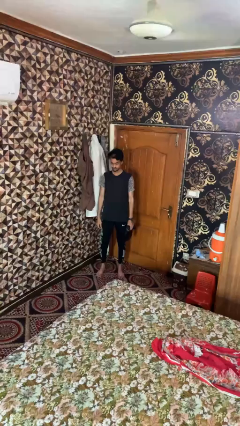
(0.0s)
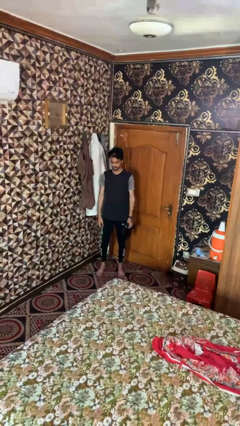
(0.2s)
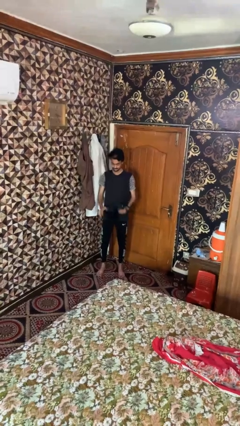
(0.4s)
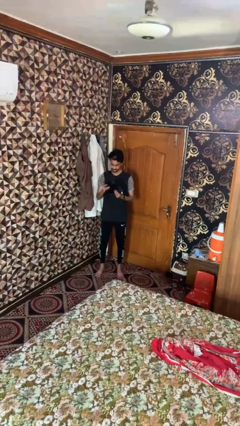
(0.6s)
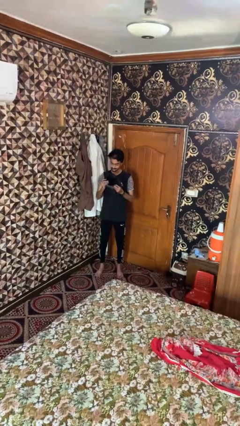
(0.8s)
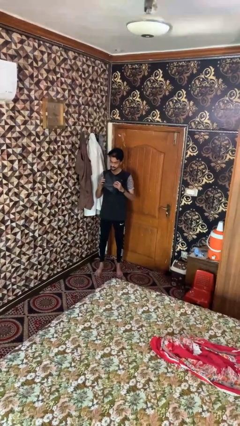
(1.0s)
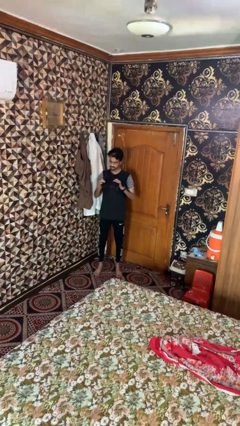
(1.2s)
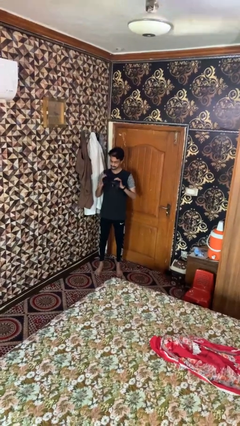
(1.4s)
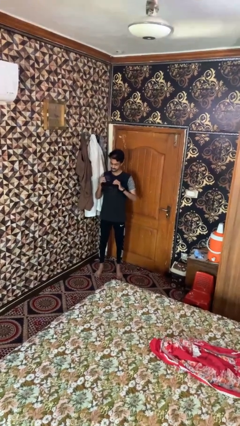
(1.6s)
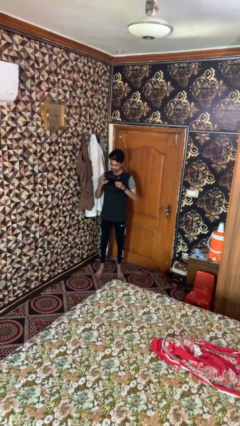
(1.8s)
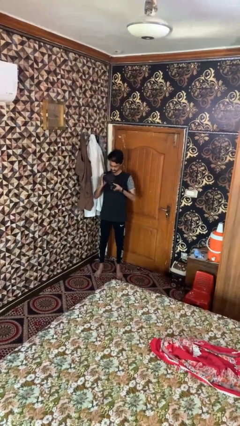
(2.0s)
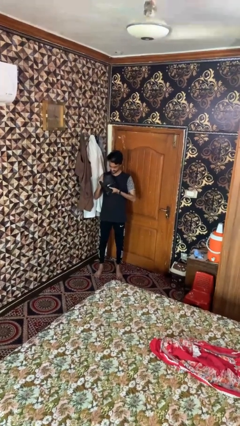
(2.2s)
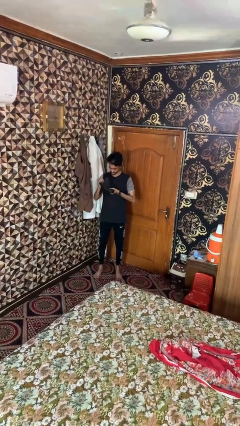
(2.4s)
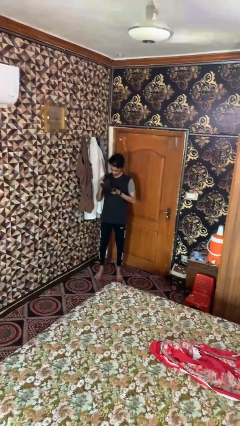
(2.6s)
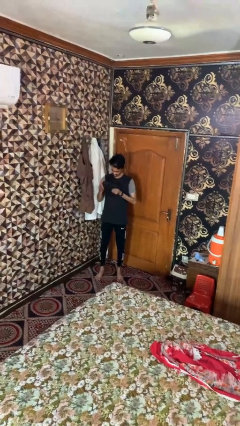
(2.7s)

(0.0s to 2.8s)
person squeezes object

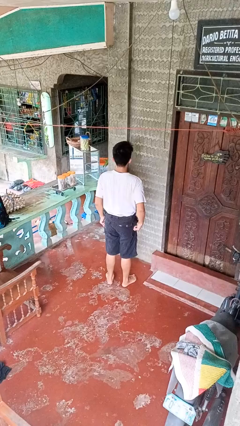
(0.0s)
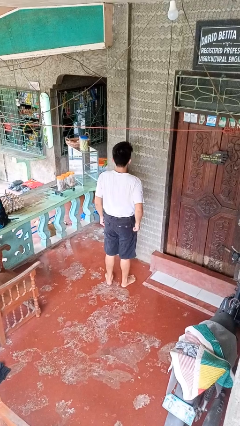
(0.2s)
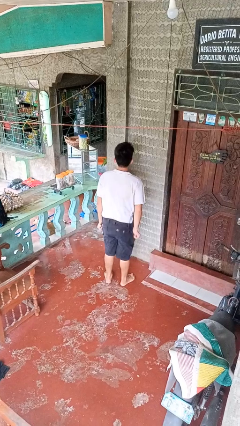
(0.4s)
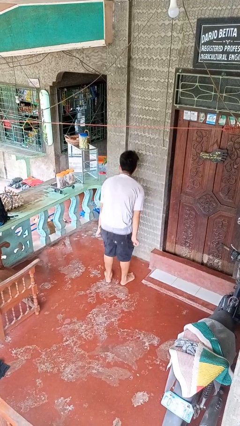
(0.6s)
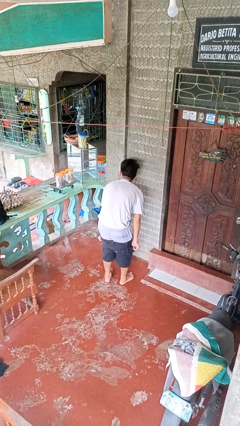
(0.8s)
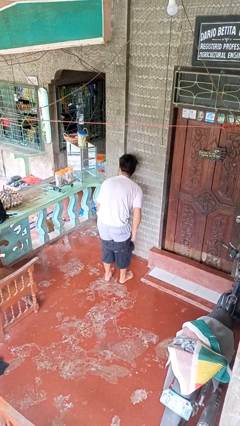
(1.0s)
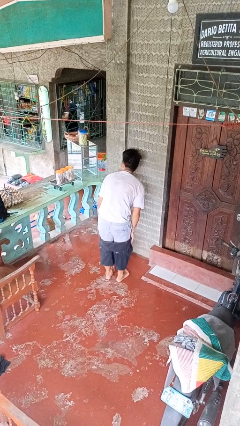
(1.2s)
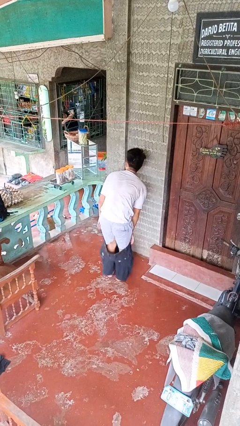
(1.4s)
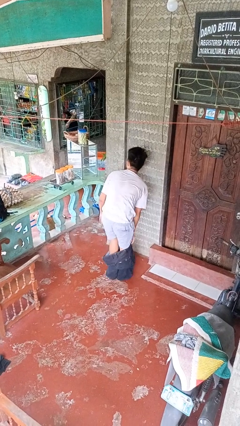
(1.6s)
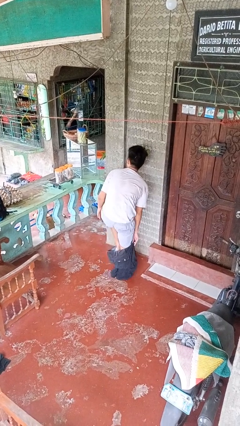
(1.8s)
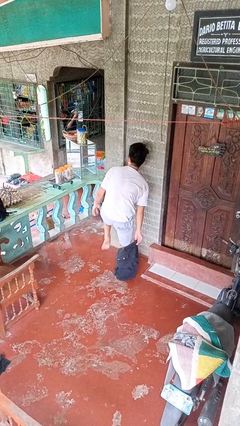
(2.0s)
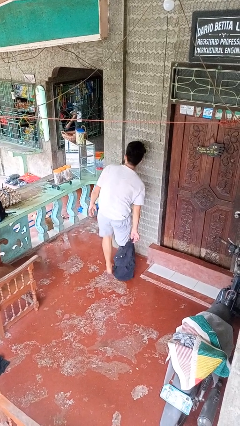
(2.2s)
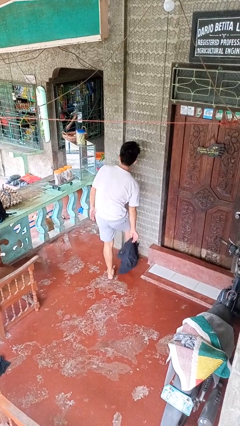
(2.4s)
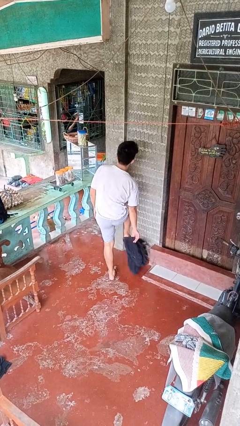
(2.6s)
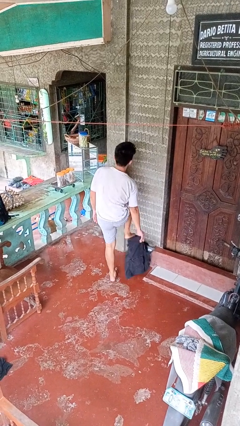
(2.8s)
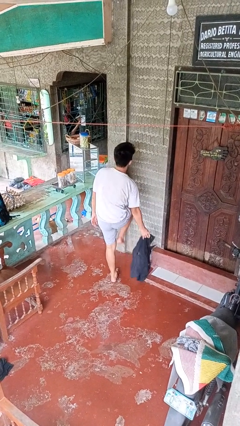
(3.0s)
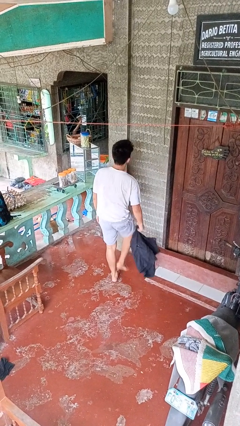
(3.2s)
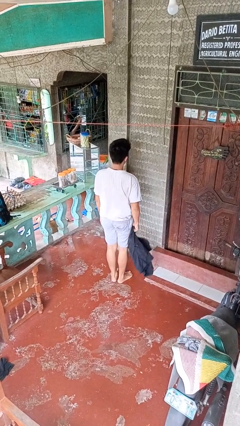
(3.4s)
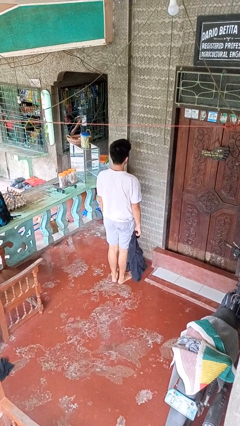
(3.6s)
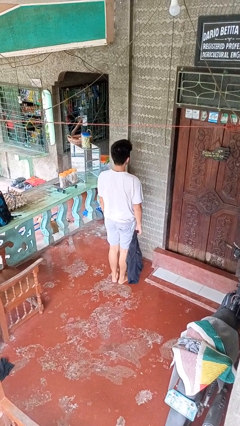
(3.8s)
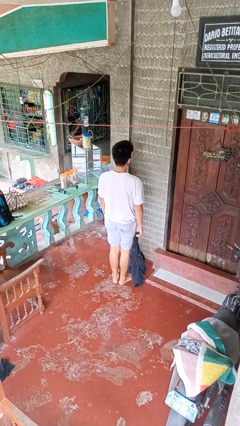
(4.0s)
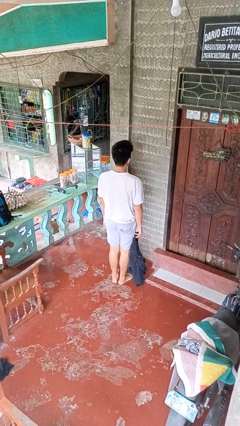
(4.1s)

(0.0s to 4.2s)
person takes off pants

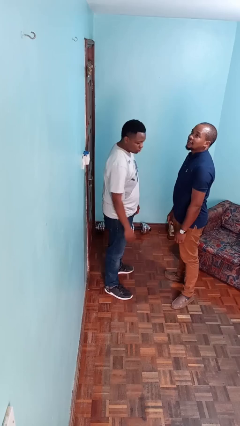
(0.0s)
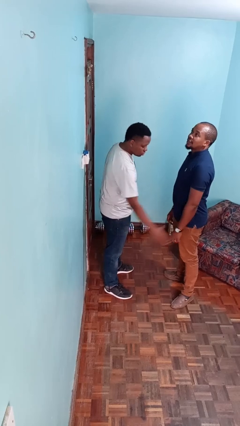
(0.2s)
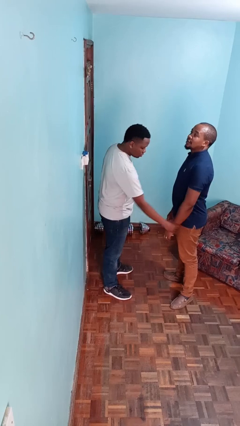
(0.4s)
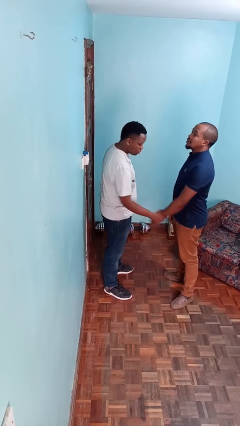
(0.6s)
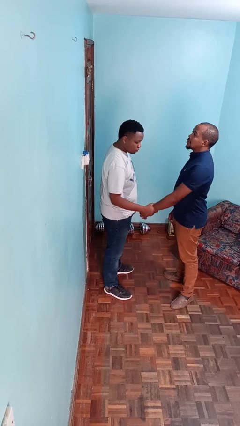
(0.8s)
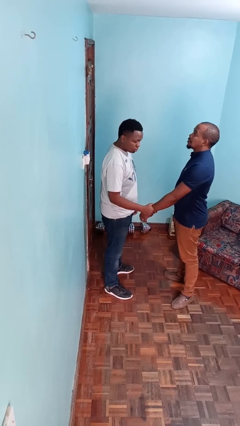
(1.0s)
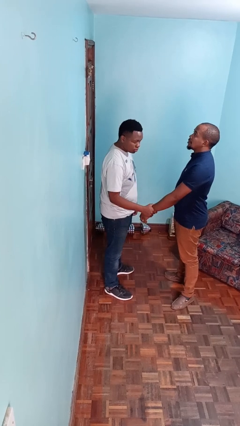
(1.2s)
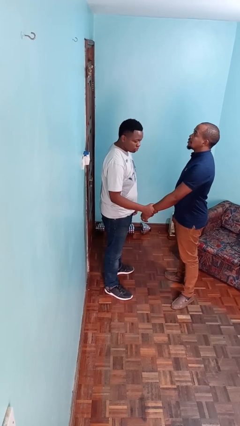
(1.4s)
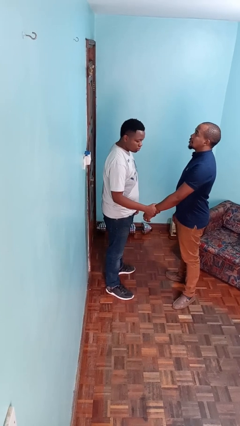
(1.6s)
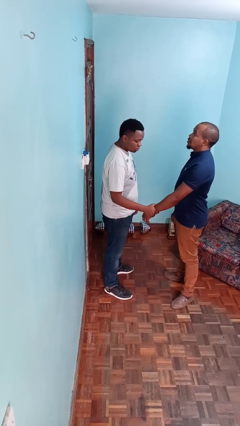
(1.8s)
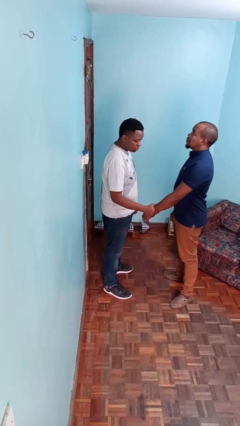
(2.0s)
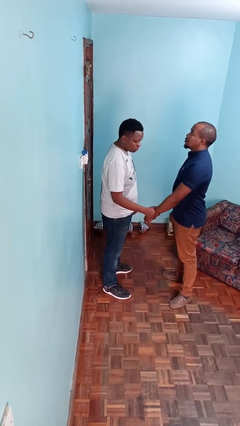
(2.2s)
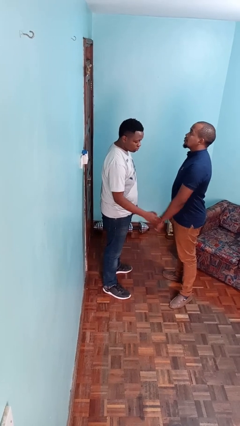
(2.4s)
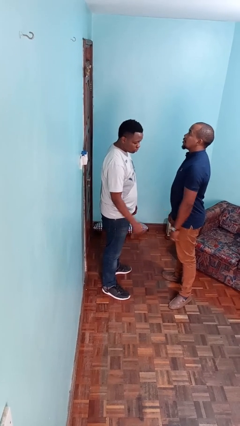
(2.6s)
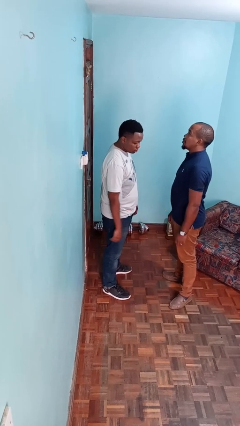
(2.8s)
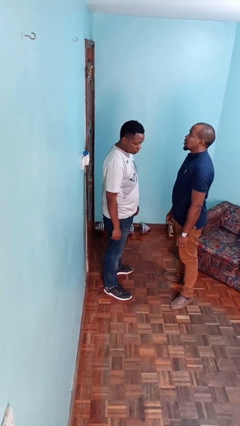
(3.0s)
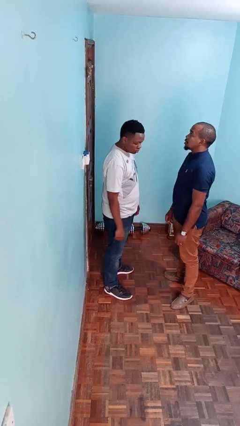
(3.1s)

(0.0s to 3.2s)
person grabs person by forearm

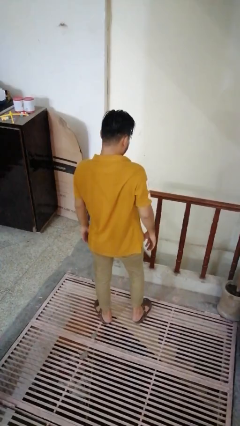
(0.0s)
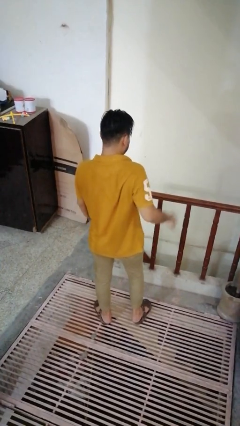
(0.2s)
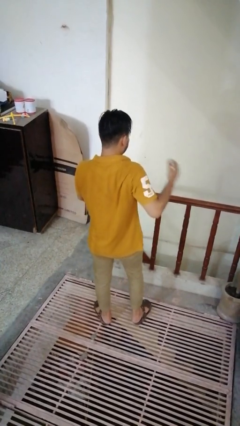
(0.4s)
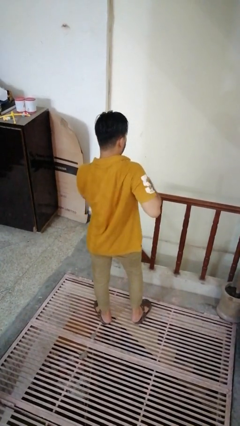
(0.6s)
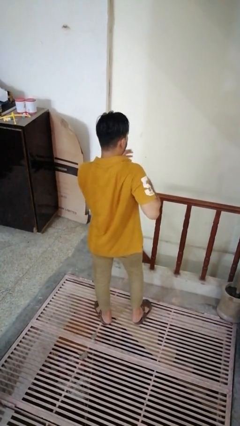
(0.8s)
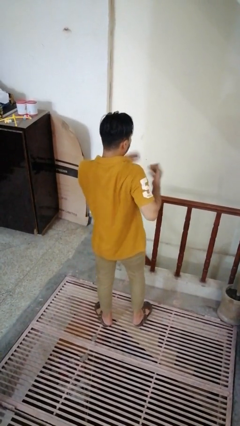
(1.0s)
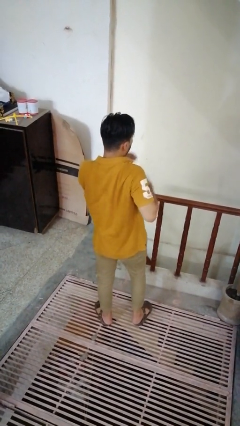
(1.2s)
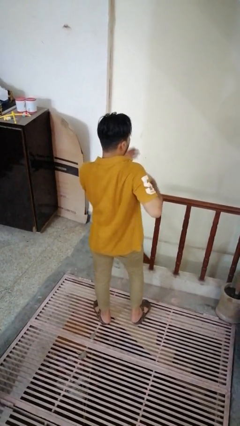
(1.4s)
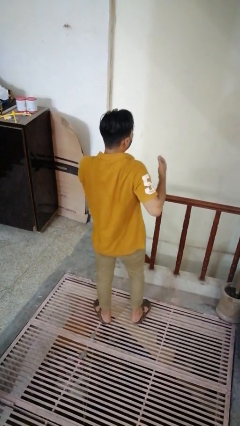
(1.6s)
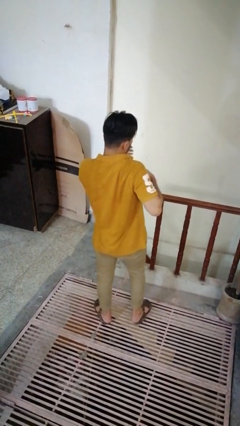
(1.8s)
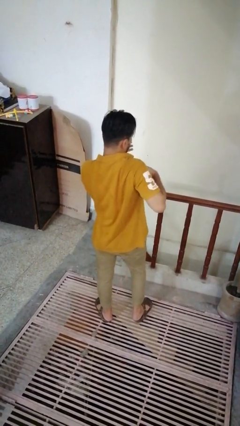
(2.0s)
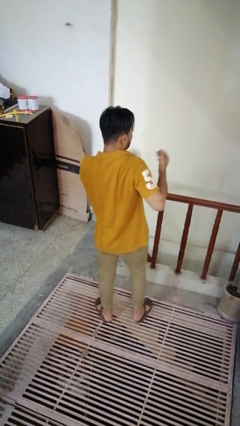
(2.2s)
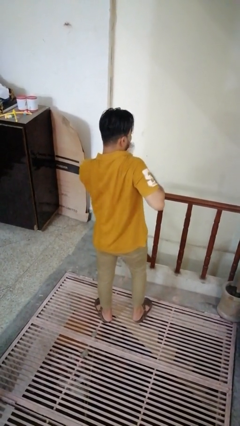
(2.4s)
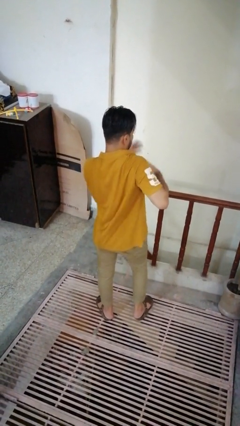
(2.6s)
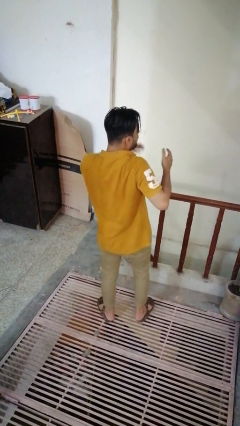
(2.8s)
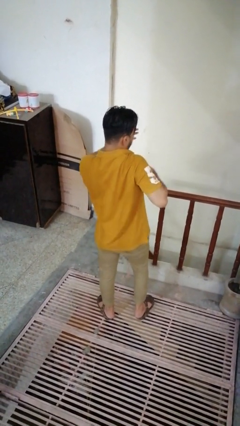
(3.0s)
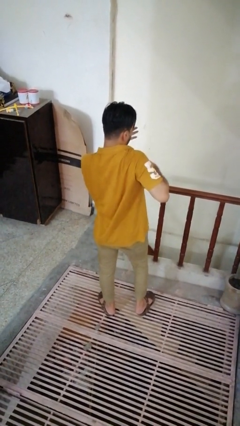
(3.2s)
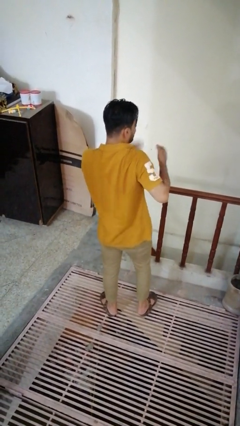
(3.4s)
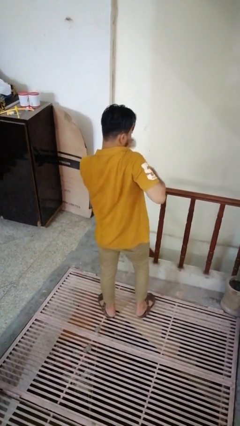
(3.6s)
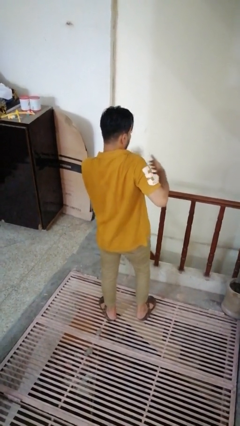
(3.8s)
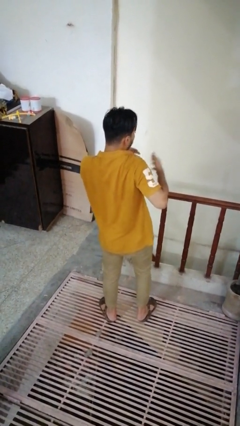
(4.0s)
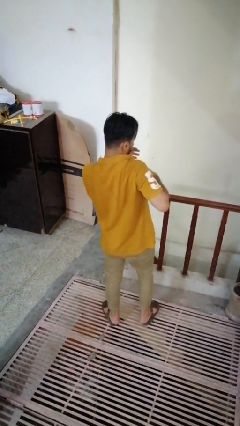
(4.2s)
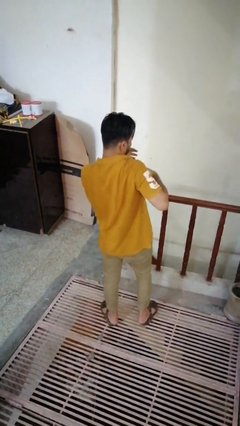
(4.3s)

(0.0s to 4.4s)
person drums on chest

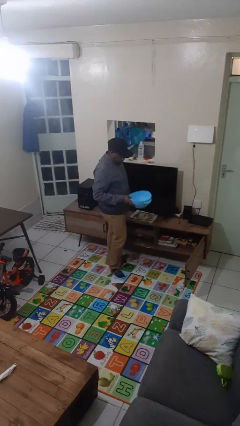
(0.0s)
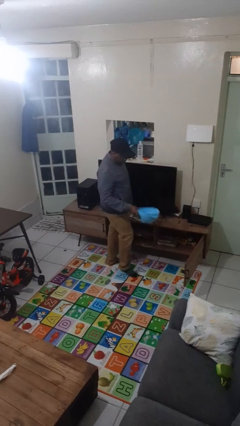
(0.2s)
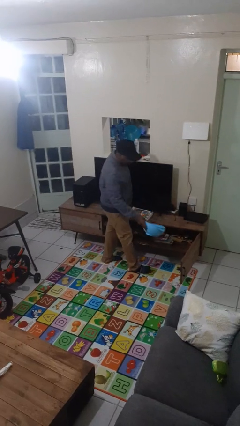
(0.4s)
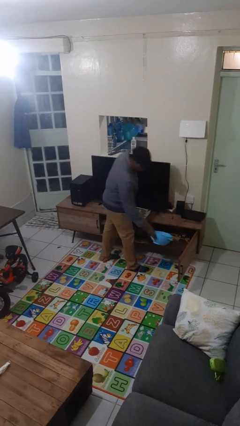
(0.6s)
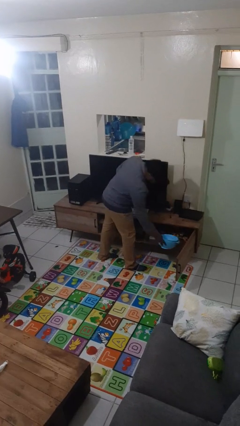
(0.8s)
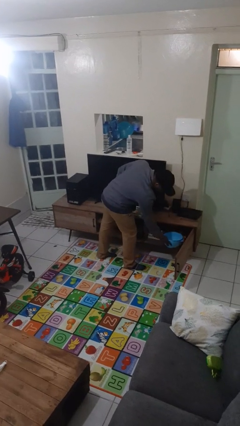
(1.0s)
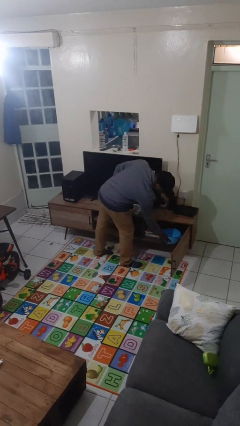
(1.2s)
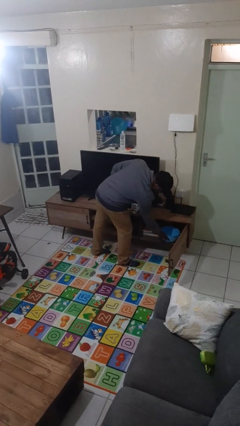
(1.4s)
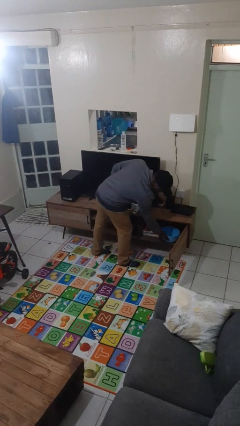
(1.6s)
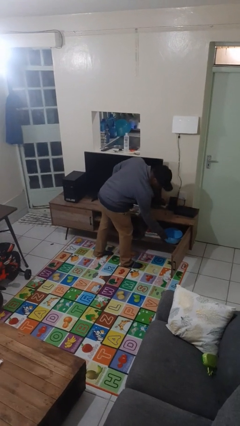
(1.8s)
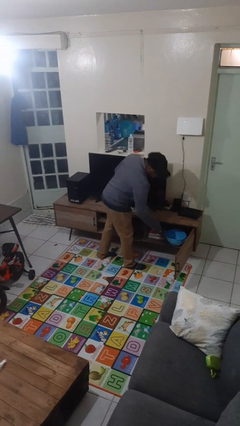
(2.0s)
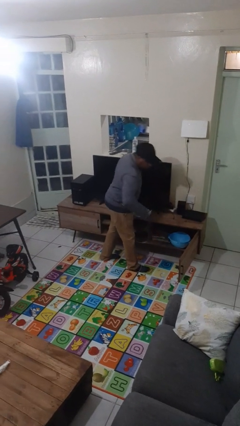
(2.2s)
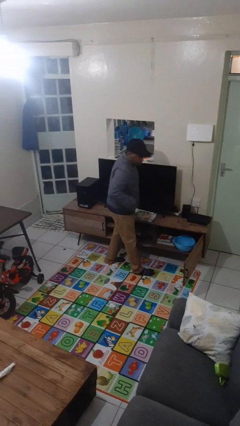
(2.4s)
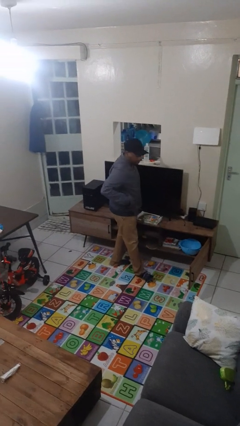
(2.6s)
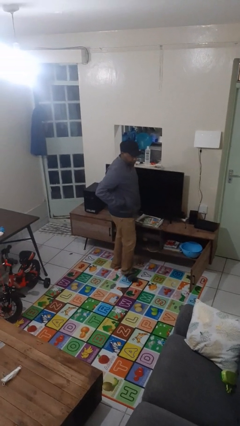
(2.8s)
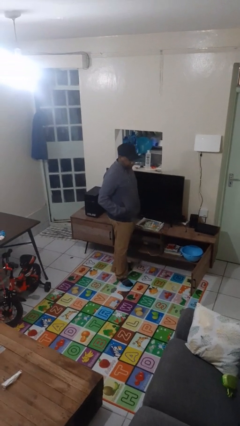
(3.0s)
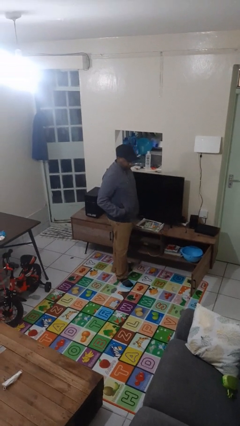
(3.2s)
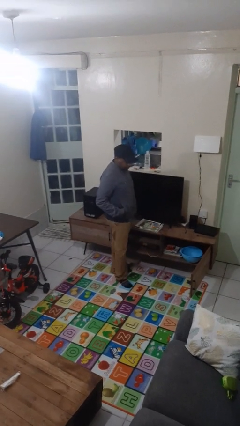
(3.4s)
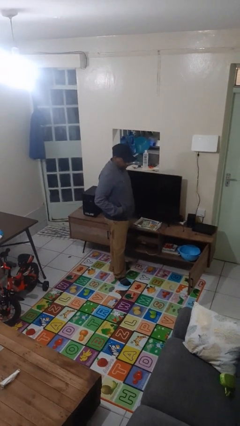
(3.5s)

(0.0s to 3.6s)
person puts down object into cabinet
